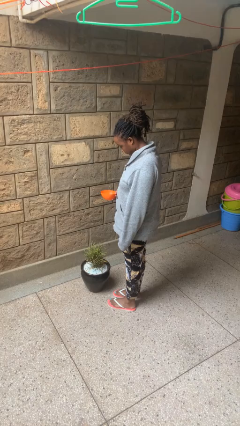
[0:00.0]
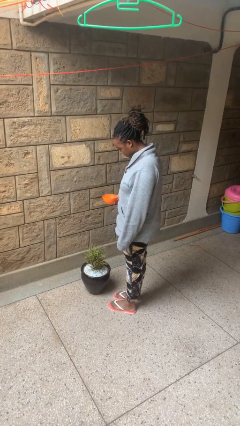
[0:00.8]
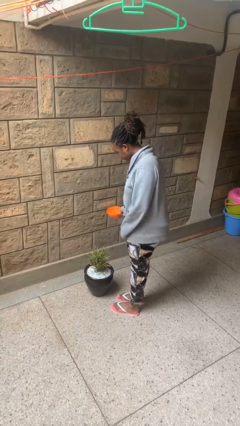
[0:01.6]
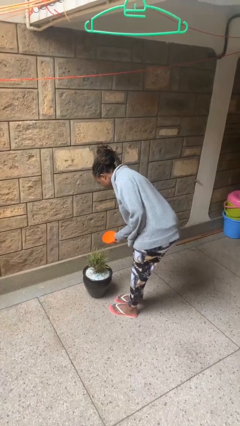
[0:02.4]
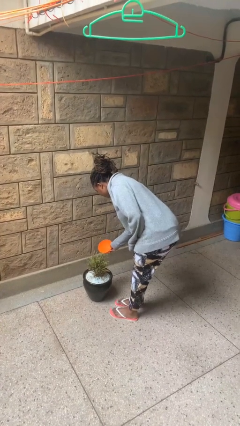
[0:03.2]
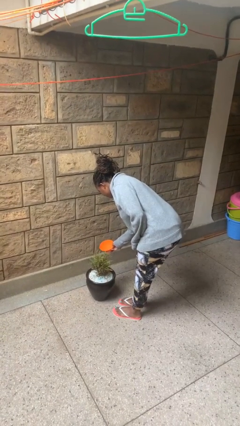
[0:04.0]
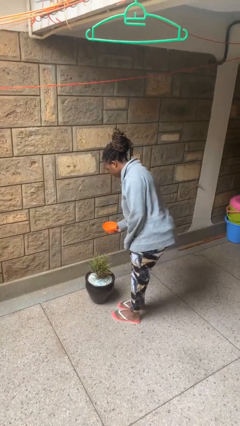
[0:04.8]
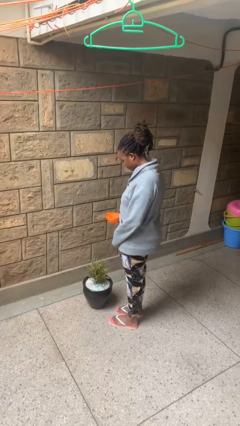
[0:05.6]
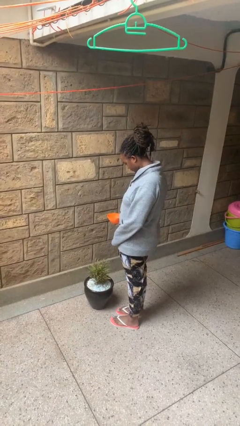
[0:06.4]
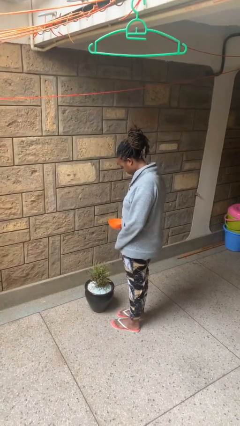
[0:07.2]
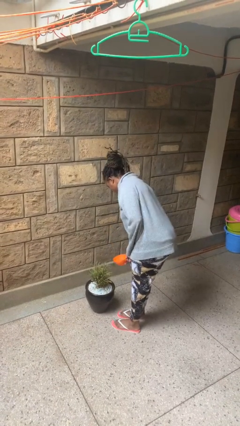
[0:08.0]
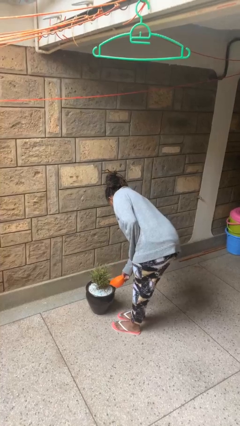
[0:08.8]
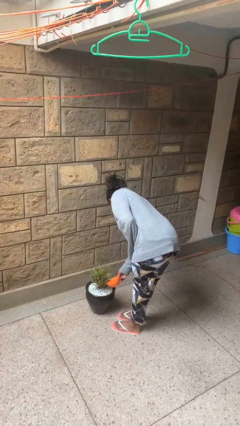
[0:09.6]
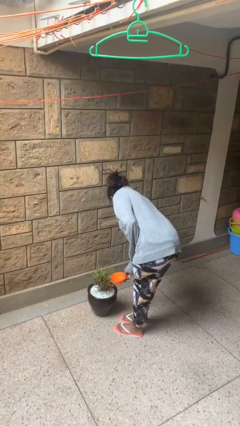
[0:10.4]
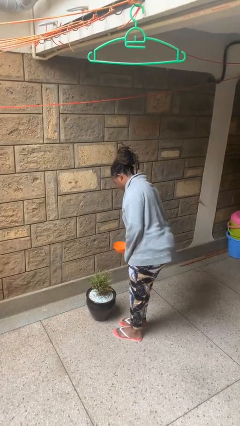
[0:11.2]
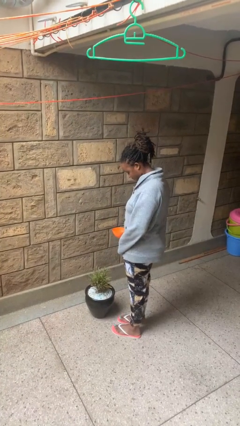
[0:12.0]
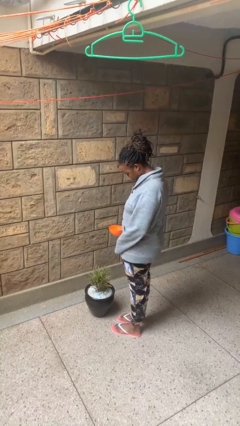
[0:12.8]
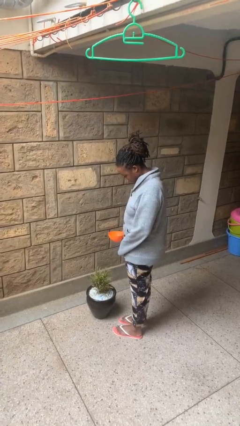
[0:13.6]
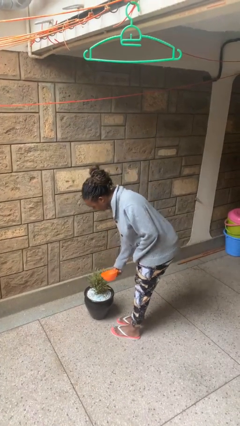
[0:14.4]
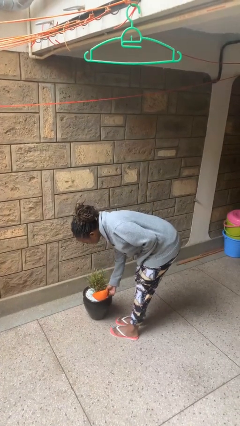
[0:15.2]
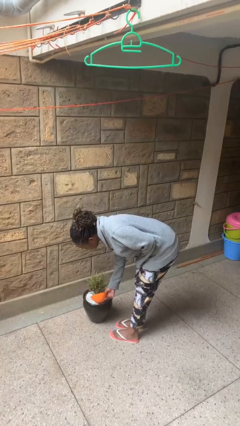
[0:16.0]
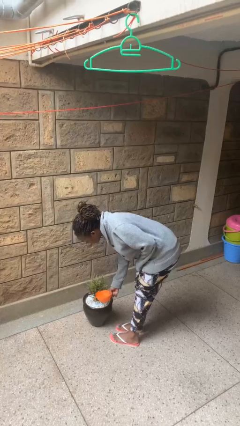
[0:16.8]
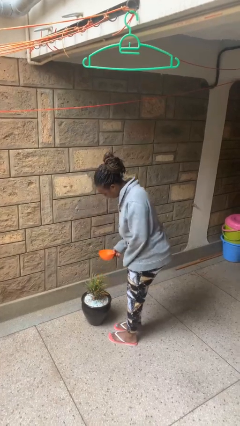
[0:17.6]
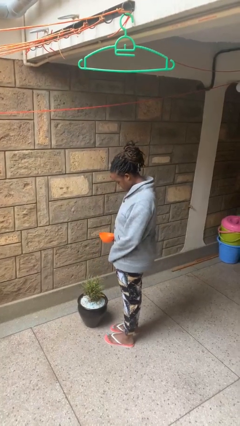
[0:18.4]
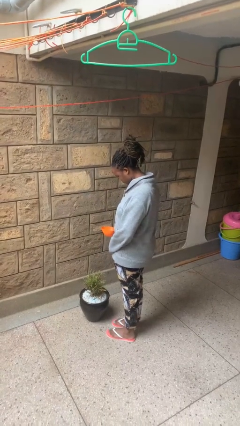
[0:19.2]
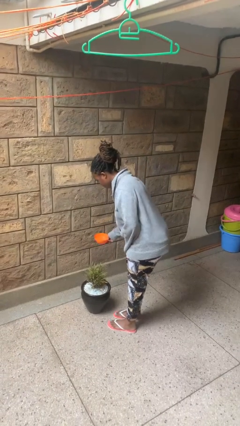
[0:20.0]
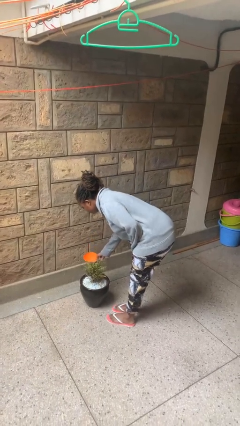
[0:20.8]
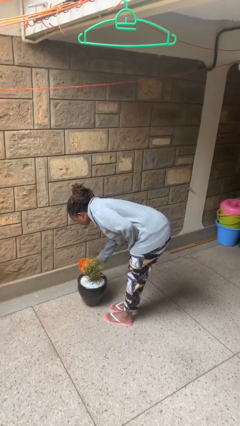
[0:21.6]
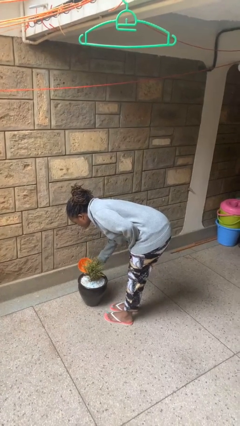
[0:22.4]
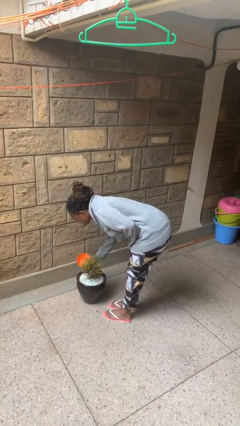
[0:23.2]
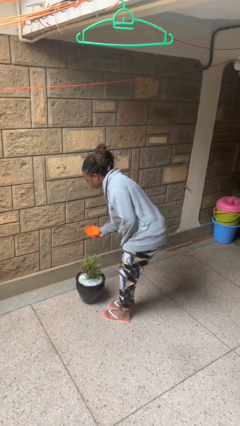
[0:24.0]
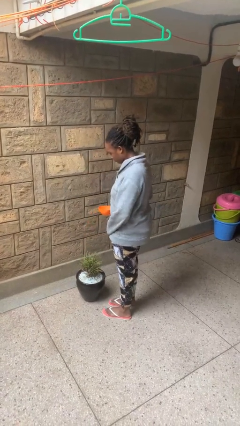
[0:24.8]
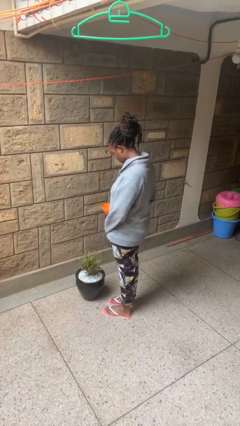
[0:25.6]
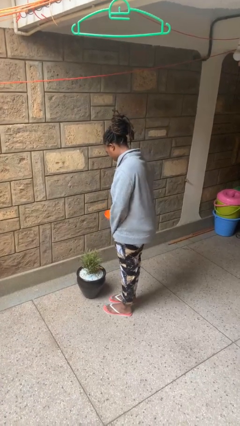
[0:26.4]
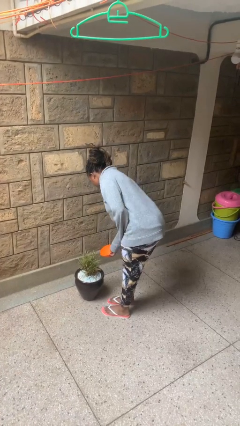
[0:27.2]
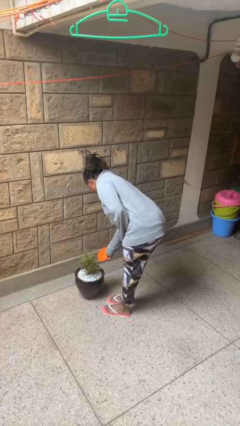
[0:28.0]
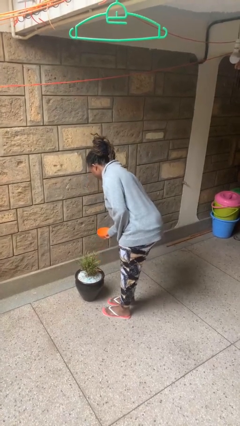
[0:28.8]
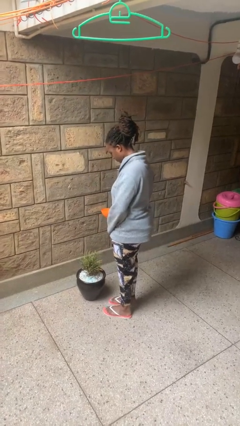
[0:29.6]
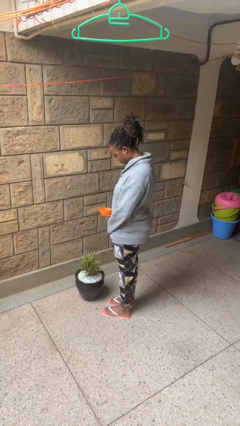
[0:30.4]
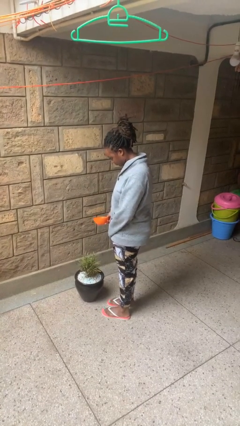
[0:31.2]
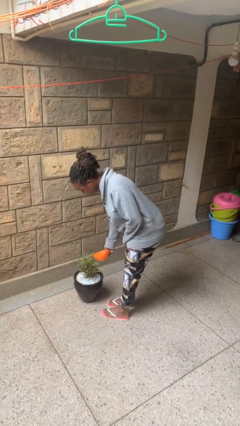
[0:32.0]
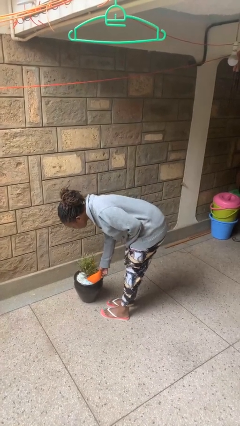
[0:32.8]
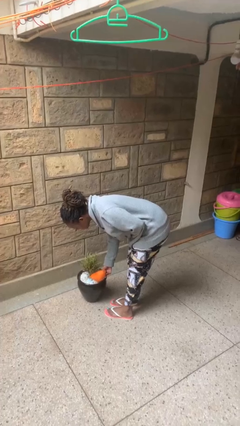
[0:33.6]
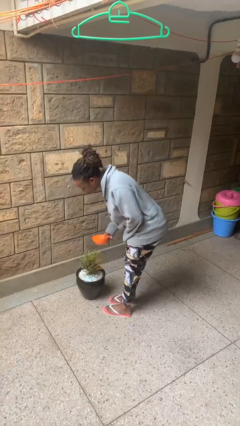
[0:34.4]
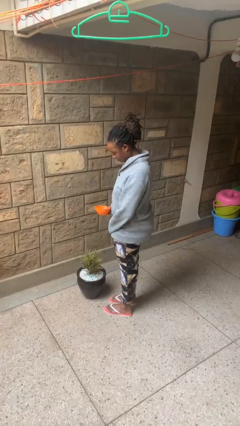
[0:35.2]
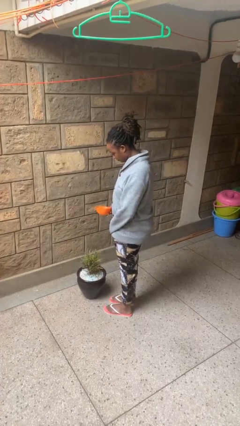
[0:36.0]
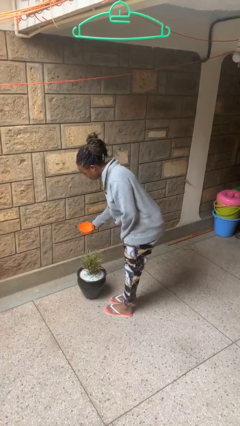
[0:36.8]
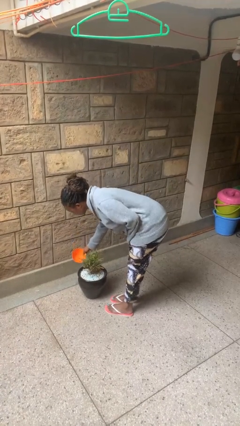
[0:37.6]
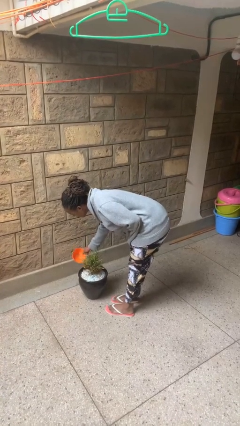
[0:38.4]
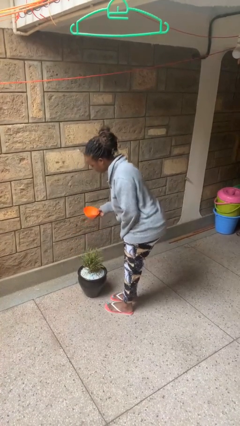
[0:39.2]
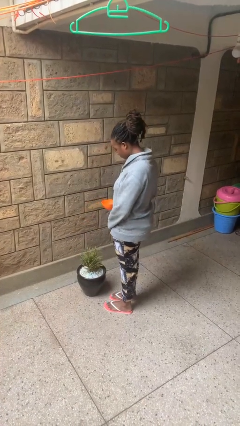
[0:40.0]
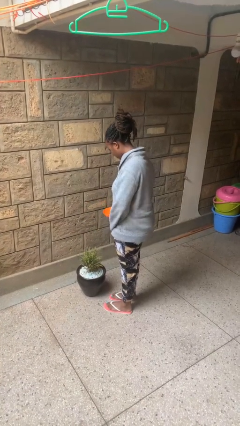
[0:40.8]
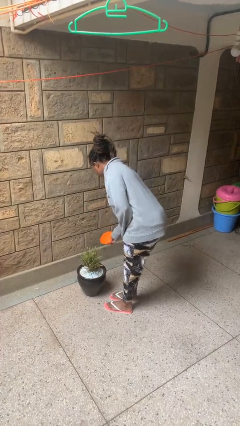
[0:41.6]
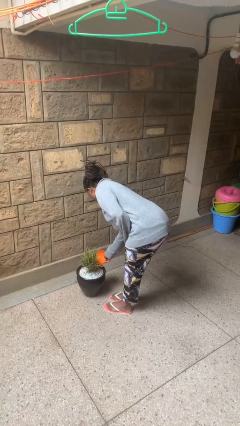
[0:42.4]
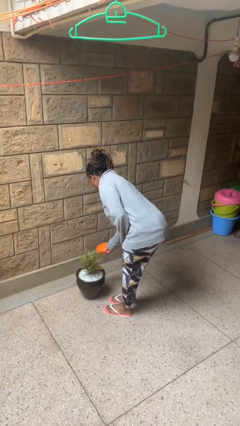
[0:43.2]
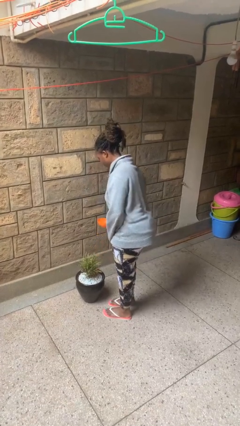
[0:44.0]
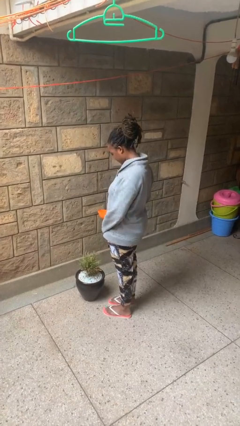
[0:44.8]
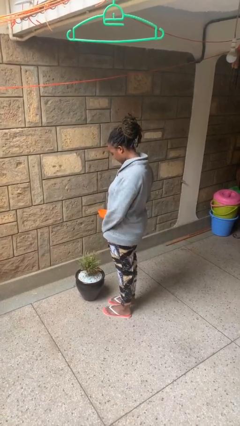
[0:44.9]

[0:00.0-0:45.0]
person waters houseplant

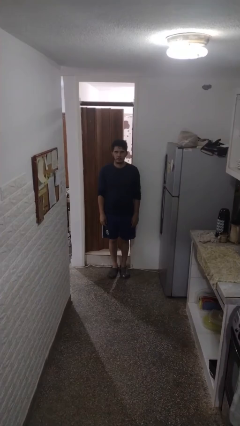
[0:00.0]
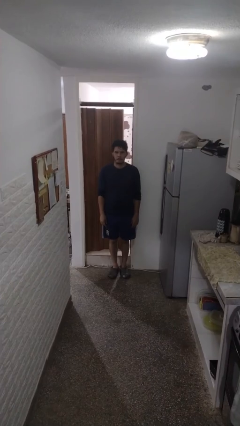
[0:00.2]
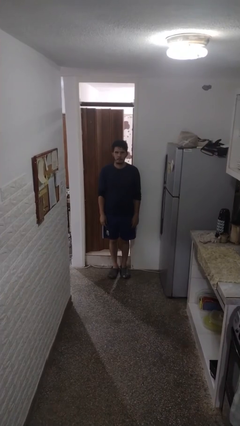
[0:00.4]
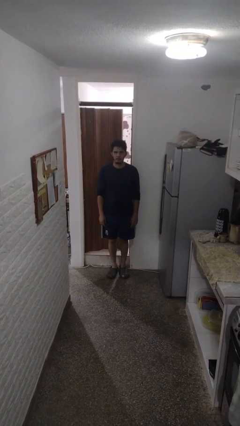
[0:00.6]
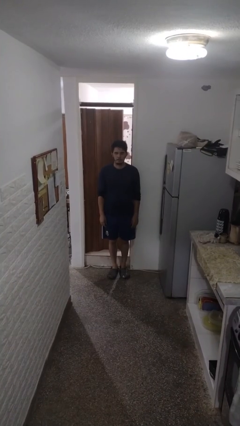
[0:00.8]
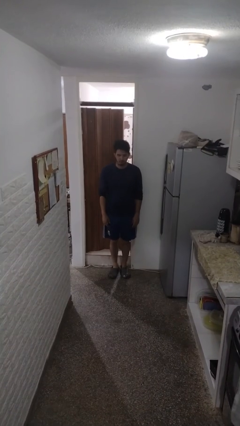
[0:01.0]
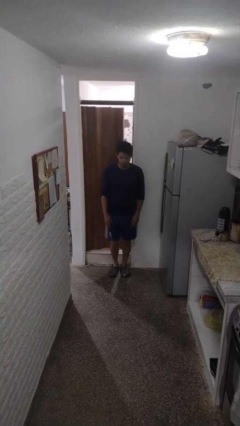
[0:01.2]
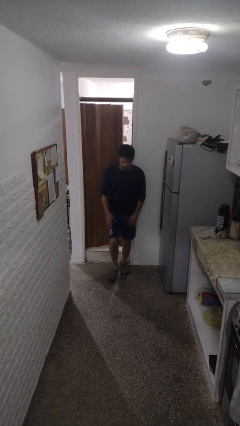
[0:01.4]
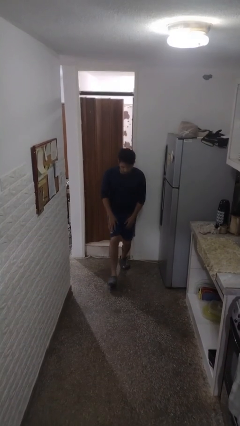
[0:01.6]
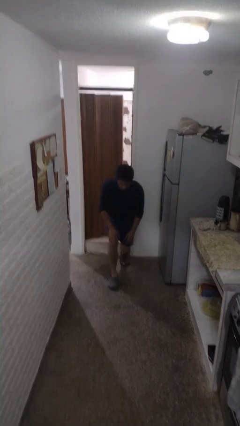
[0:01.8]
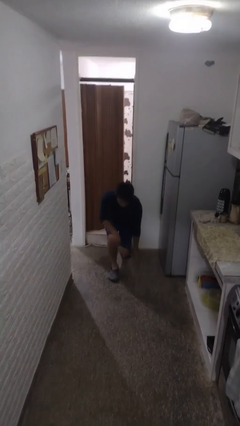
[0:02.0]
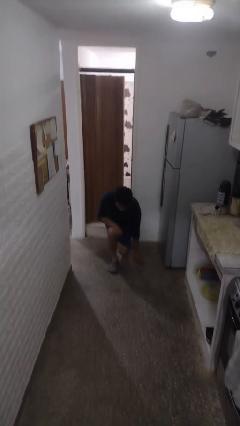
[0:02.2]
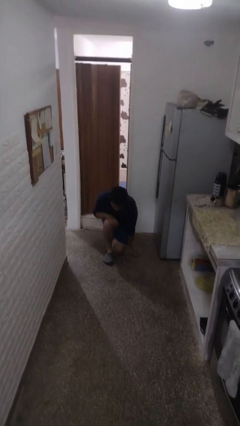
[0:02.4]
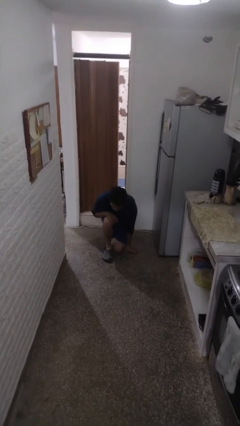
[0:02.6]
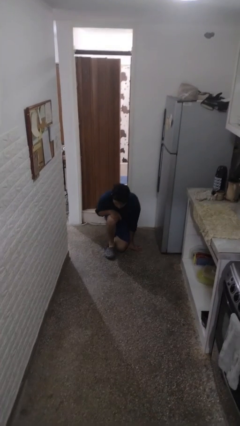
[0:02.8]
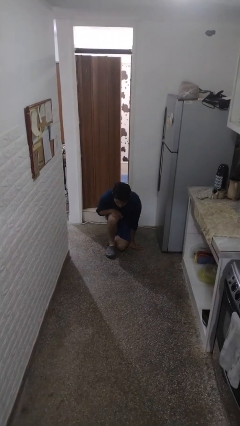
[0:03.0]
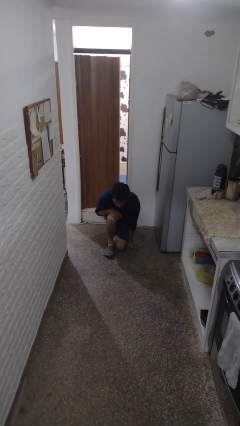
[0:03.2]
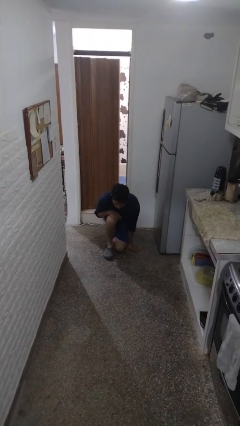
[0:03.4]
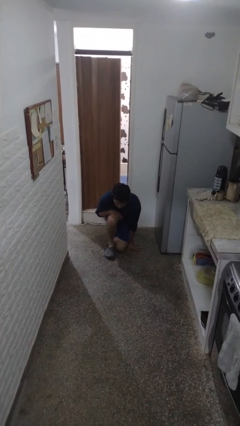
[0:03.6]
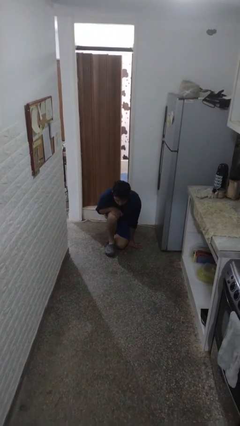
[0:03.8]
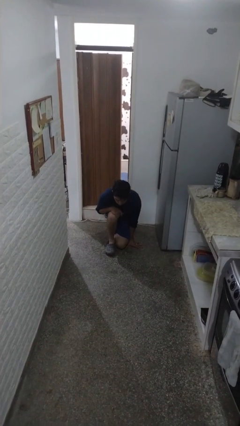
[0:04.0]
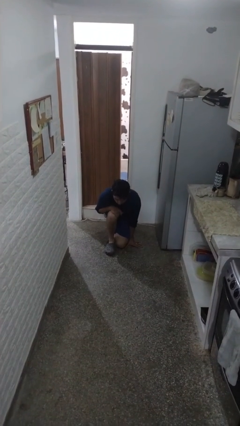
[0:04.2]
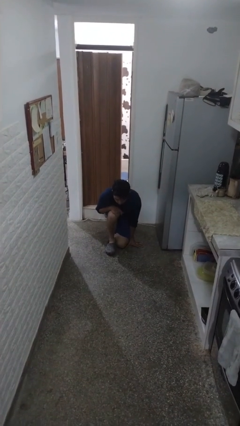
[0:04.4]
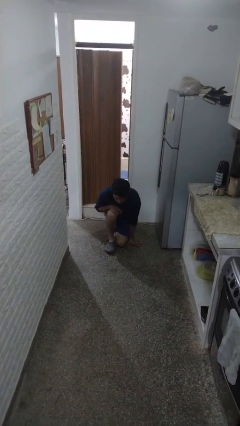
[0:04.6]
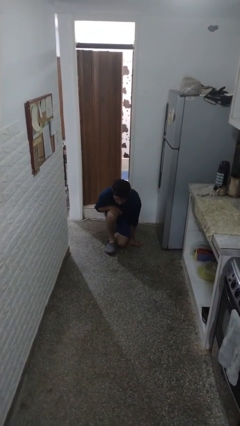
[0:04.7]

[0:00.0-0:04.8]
person kneels

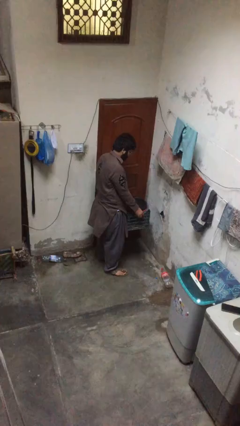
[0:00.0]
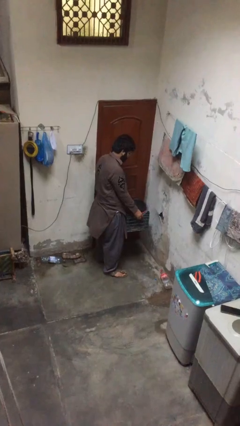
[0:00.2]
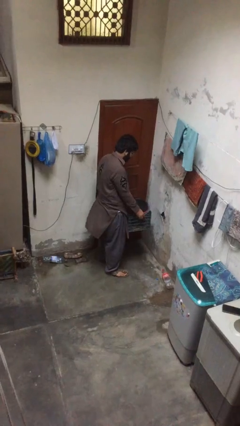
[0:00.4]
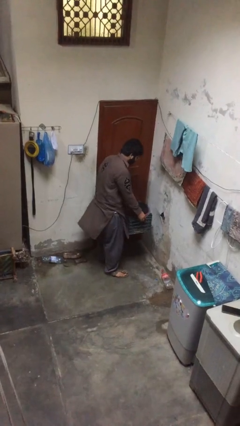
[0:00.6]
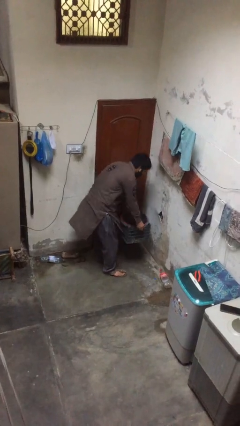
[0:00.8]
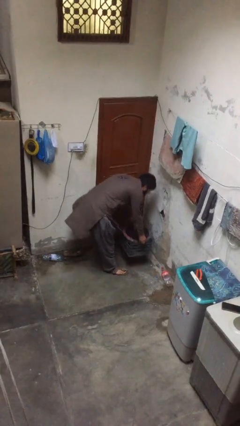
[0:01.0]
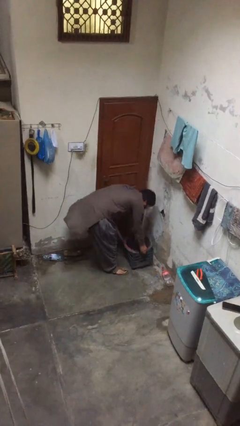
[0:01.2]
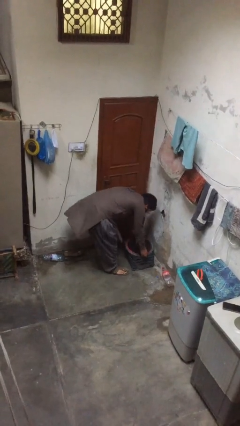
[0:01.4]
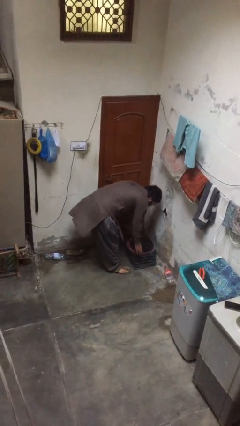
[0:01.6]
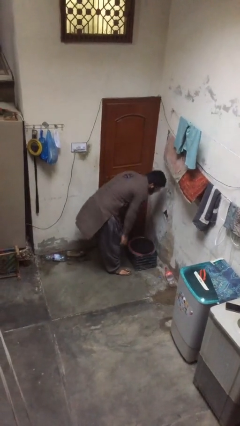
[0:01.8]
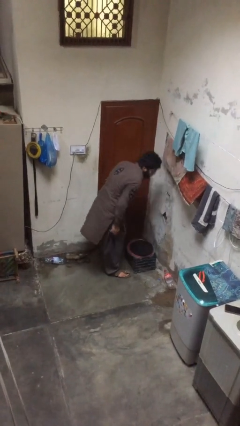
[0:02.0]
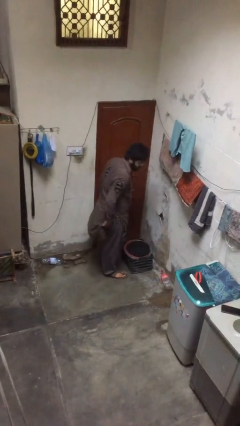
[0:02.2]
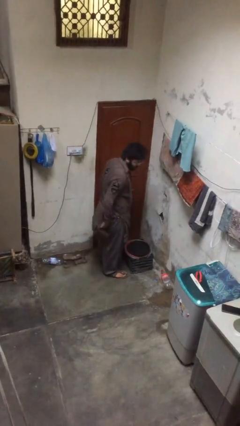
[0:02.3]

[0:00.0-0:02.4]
person puts down object on floor
